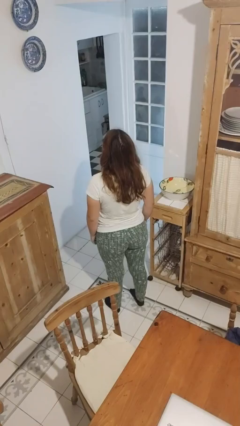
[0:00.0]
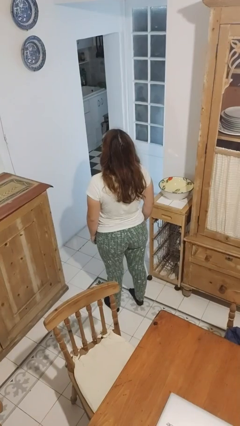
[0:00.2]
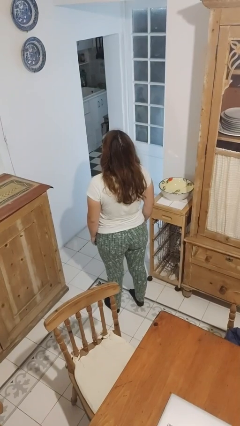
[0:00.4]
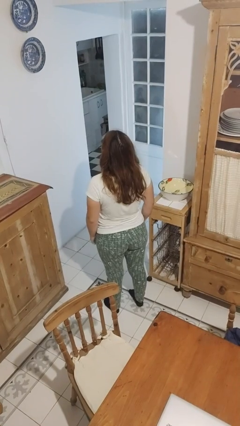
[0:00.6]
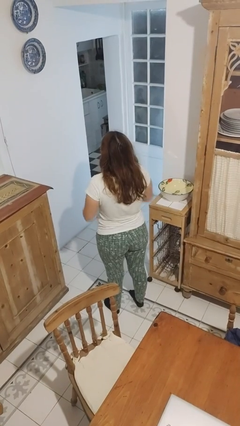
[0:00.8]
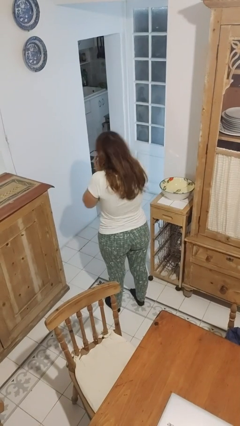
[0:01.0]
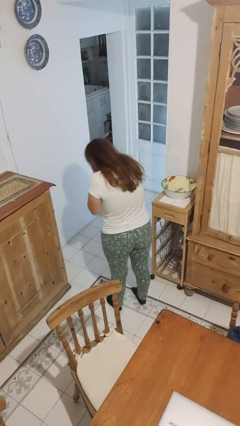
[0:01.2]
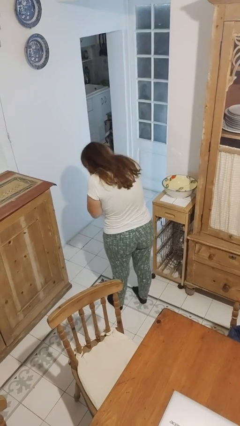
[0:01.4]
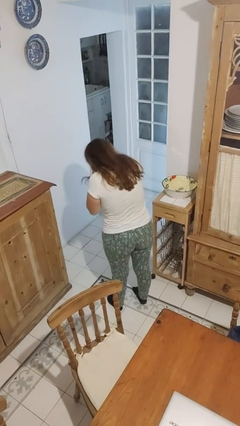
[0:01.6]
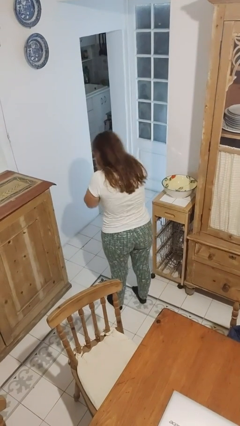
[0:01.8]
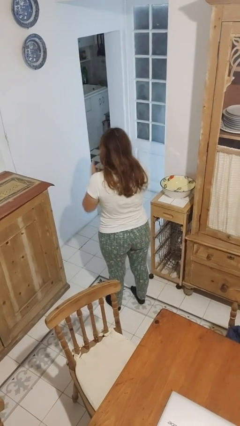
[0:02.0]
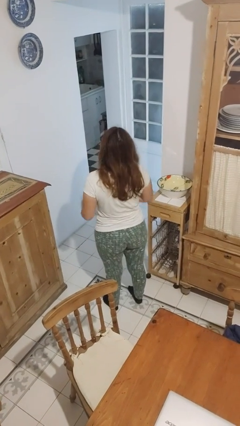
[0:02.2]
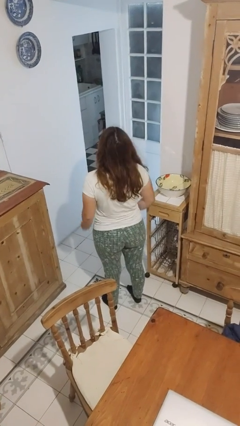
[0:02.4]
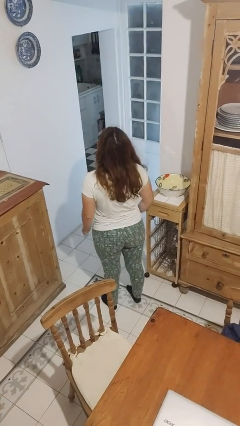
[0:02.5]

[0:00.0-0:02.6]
person sneezes into hand

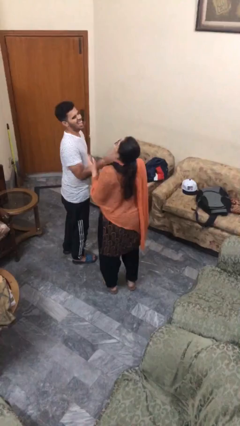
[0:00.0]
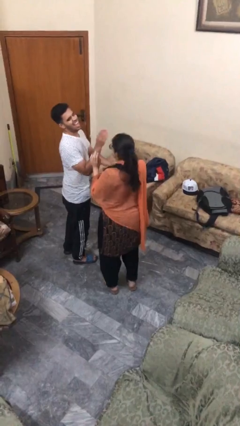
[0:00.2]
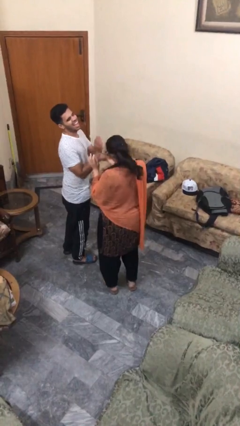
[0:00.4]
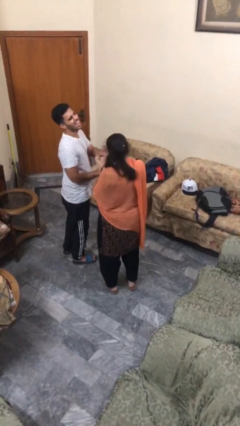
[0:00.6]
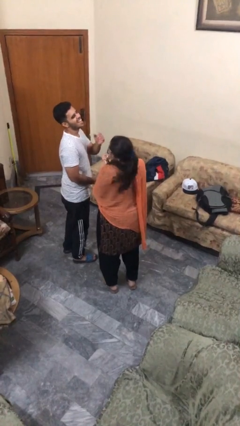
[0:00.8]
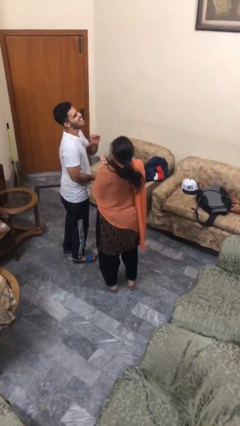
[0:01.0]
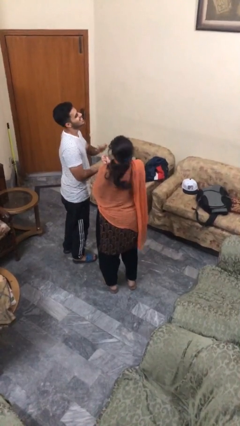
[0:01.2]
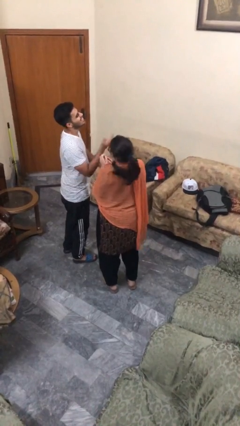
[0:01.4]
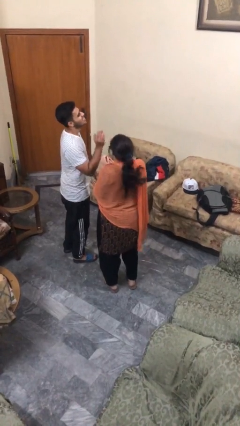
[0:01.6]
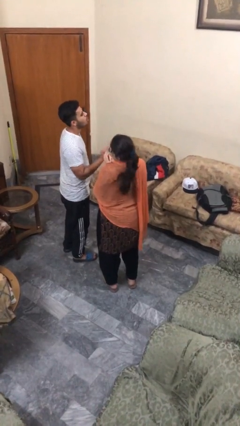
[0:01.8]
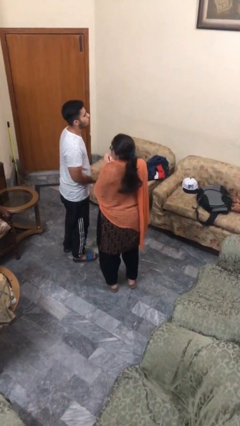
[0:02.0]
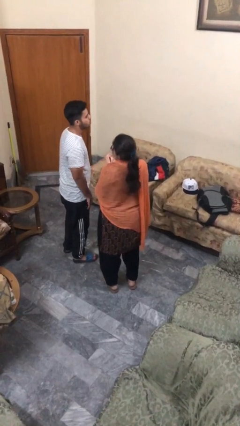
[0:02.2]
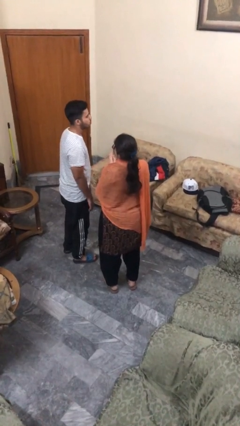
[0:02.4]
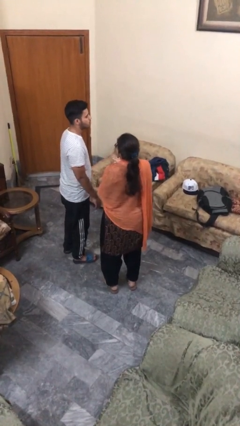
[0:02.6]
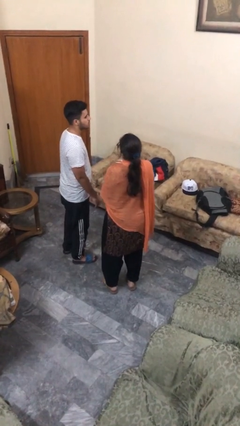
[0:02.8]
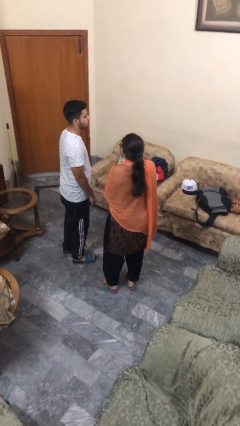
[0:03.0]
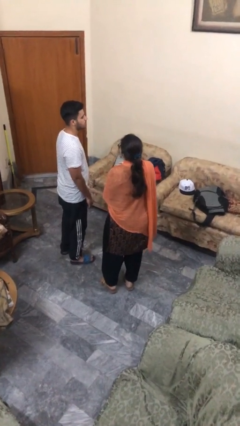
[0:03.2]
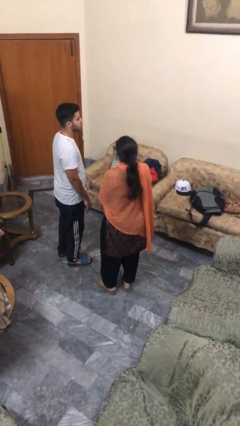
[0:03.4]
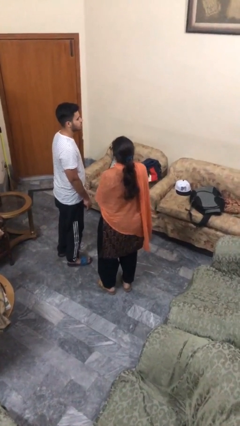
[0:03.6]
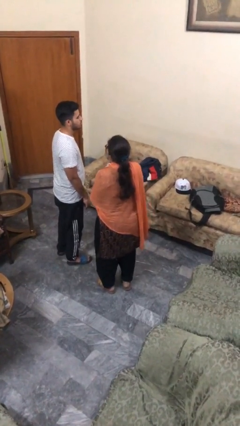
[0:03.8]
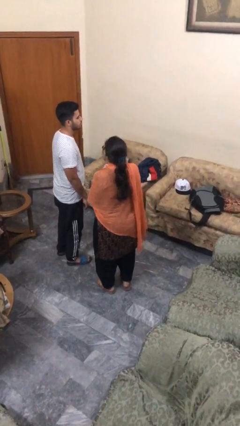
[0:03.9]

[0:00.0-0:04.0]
person laughs with person

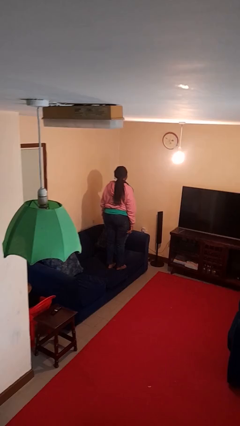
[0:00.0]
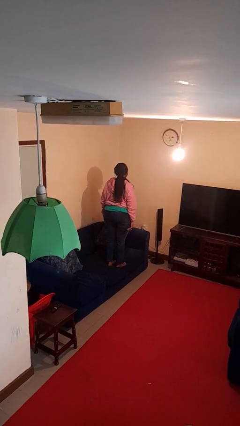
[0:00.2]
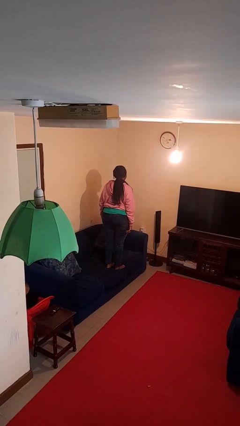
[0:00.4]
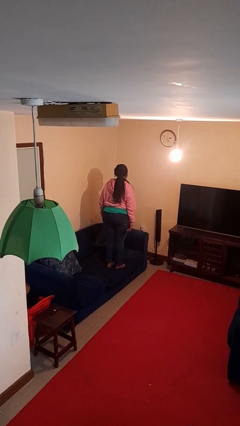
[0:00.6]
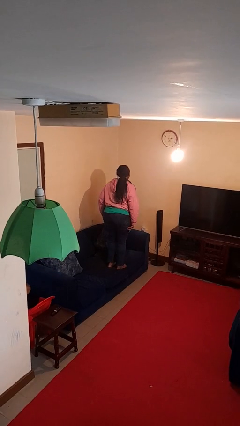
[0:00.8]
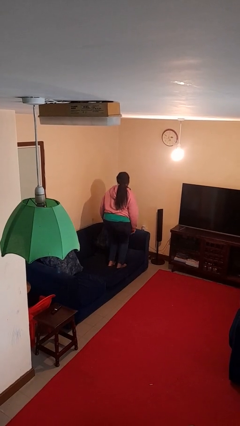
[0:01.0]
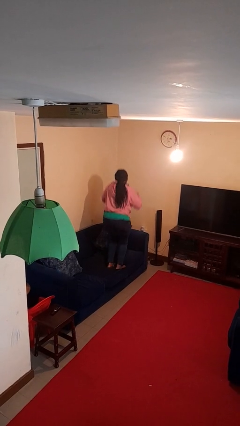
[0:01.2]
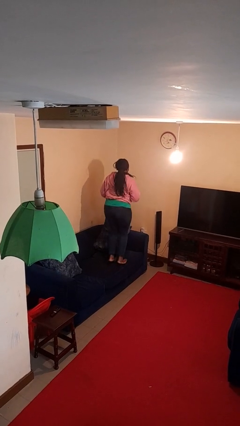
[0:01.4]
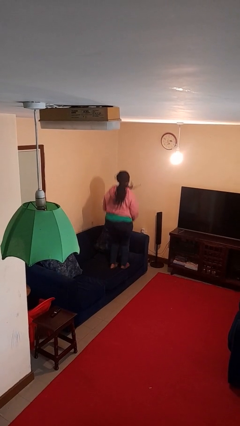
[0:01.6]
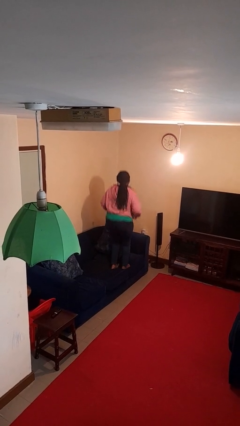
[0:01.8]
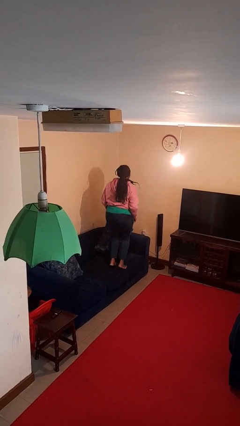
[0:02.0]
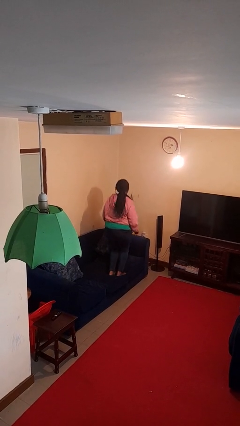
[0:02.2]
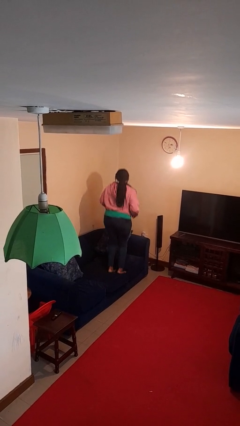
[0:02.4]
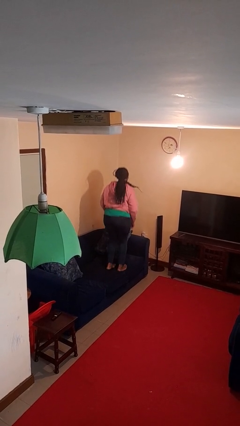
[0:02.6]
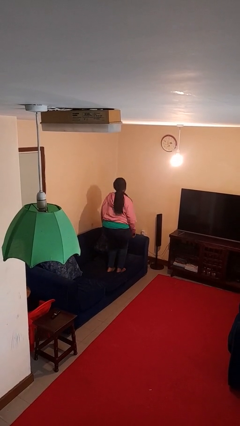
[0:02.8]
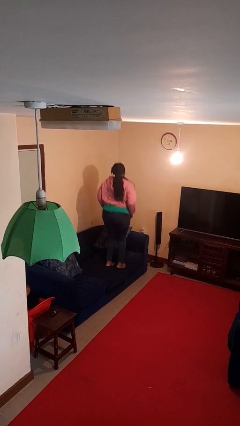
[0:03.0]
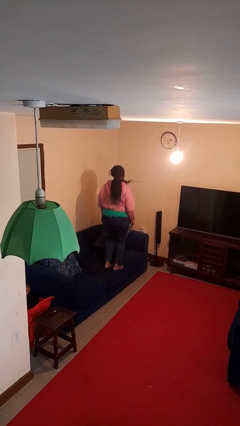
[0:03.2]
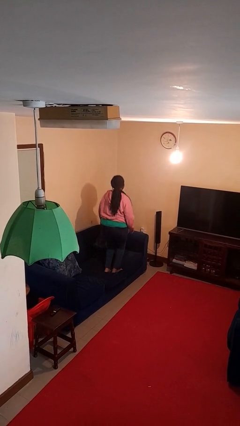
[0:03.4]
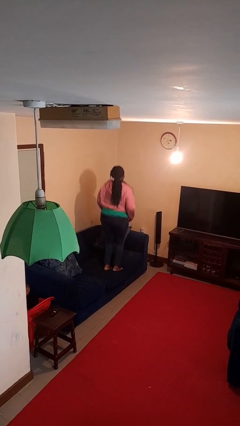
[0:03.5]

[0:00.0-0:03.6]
person jumps on couch

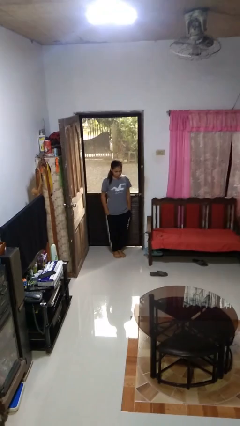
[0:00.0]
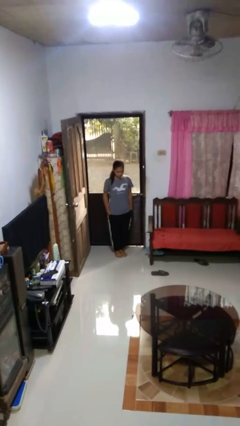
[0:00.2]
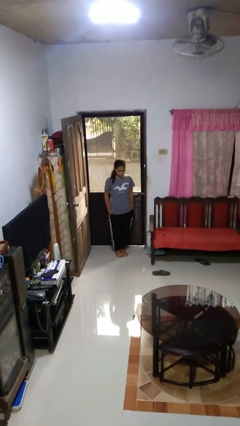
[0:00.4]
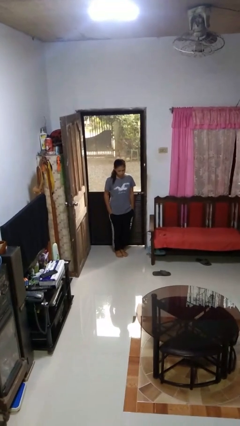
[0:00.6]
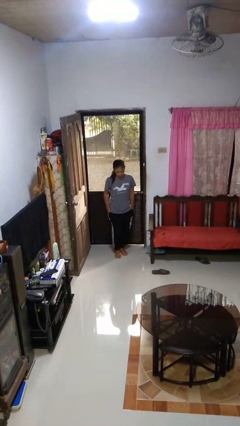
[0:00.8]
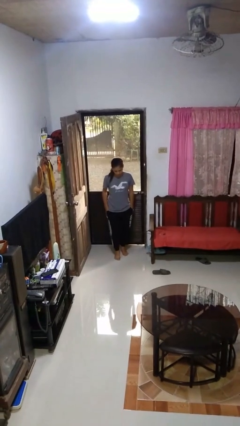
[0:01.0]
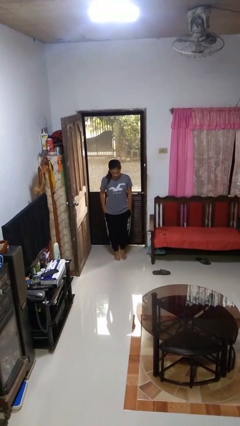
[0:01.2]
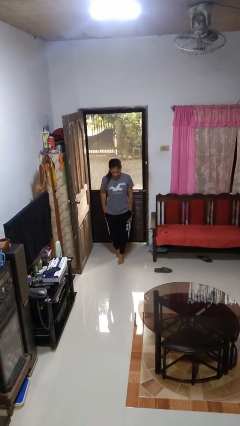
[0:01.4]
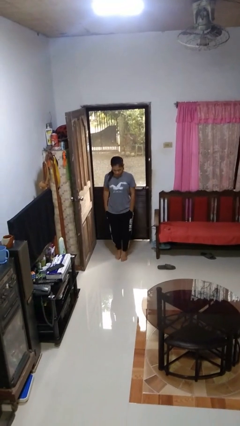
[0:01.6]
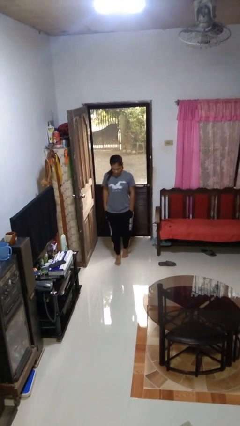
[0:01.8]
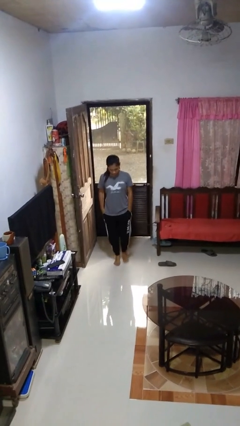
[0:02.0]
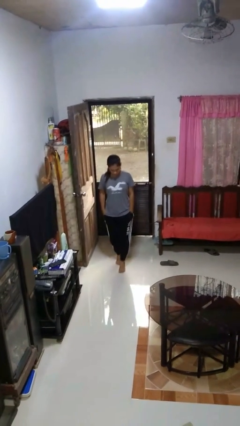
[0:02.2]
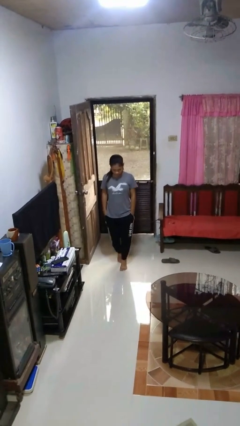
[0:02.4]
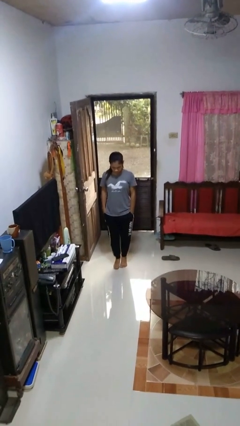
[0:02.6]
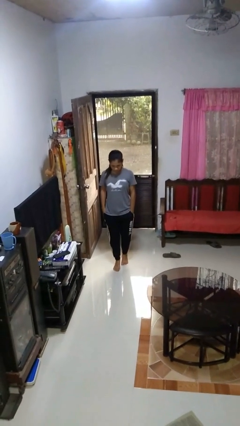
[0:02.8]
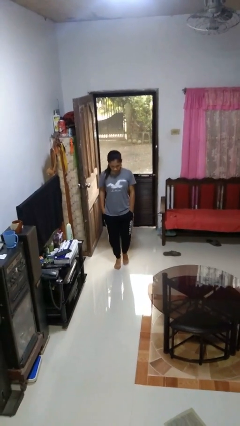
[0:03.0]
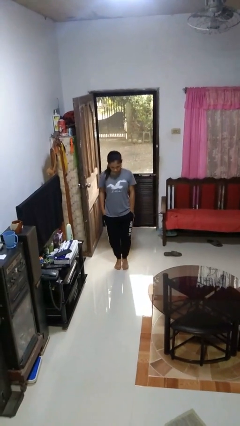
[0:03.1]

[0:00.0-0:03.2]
person walks tiptoe

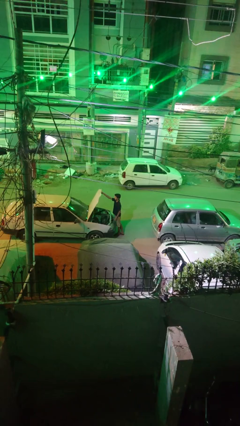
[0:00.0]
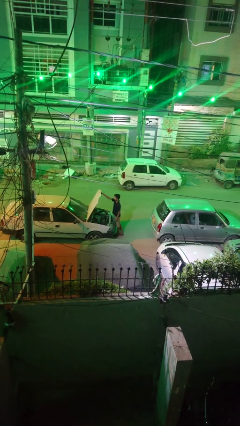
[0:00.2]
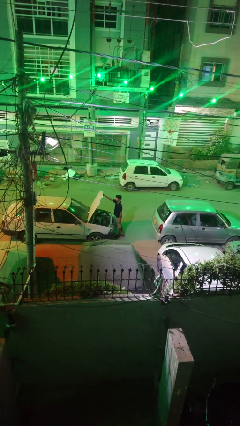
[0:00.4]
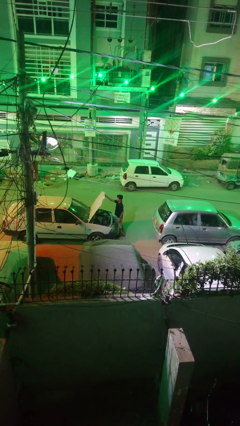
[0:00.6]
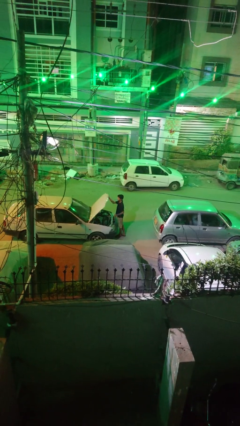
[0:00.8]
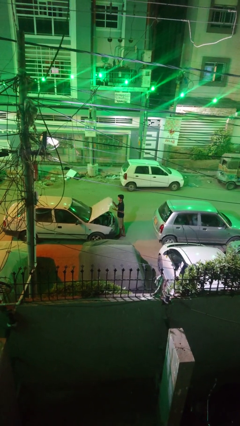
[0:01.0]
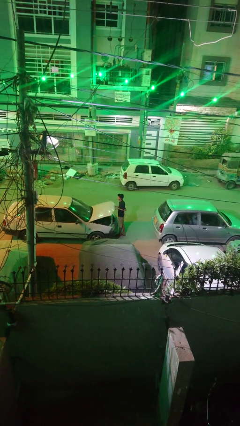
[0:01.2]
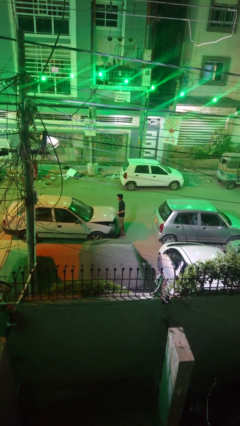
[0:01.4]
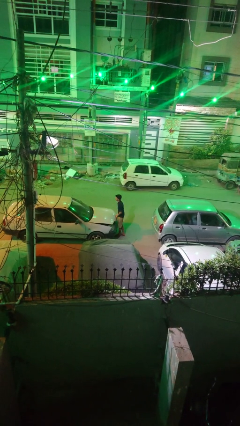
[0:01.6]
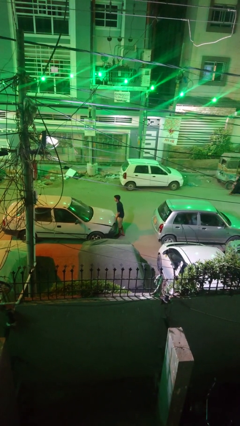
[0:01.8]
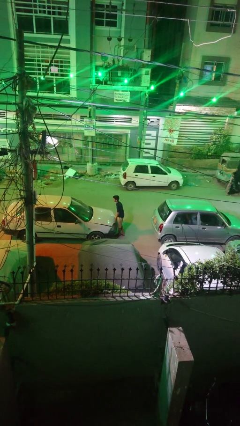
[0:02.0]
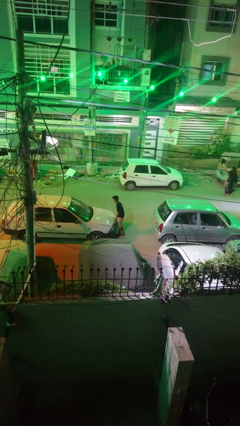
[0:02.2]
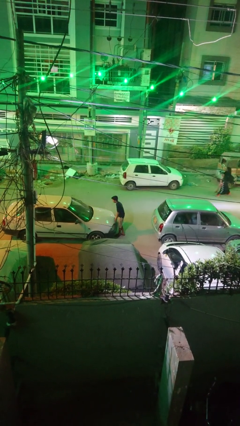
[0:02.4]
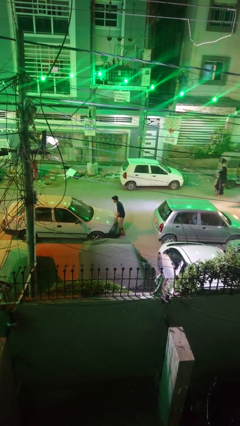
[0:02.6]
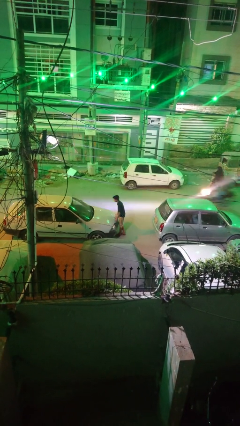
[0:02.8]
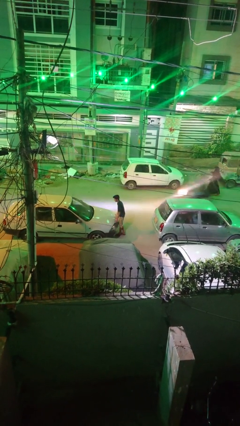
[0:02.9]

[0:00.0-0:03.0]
person closes car hood

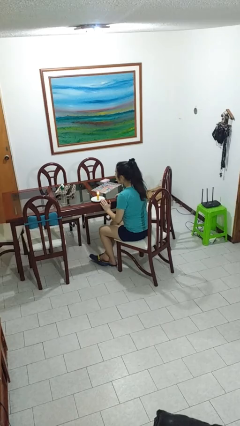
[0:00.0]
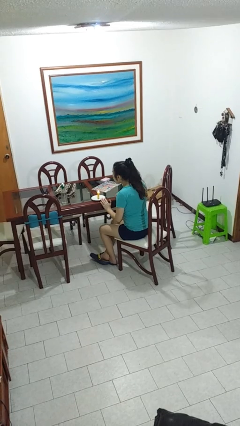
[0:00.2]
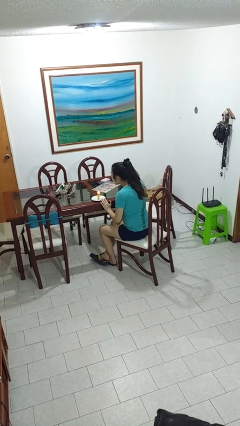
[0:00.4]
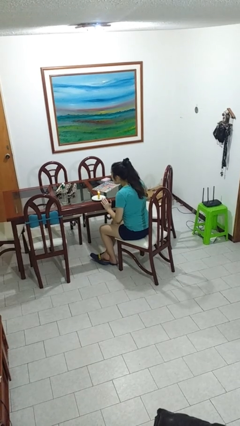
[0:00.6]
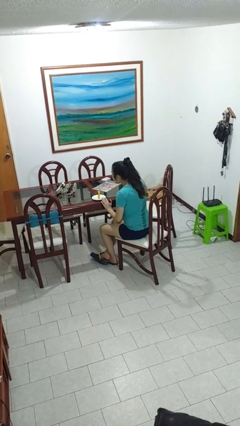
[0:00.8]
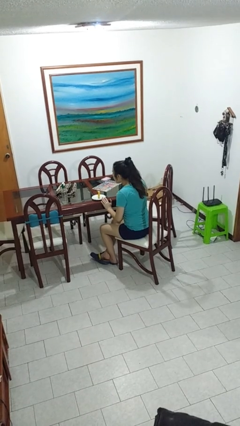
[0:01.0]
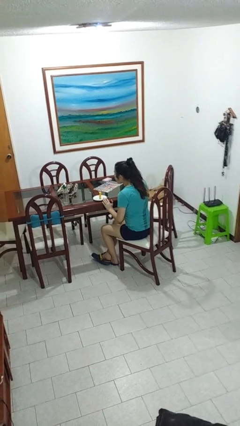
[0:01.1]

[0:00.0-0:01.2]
person extinguishes candle
